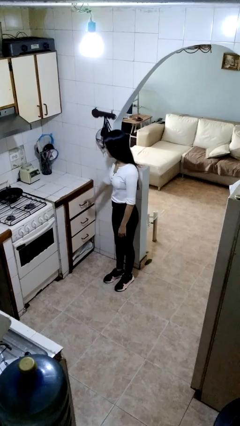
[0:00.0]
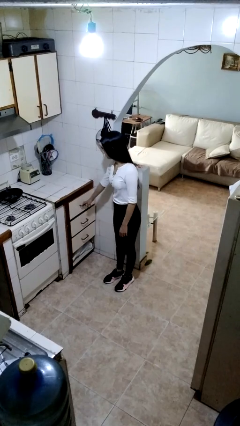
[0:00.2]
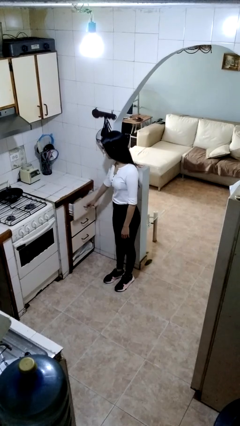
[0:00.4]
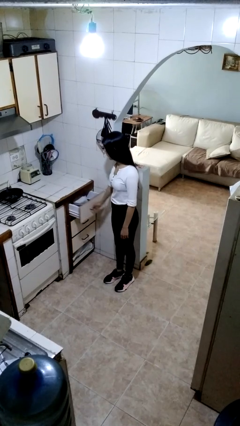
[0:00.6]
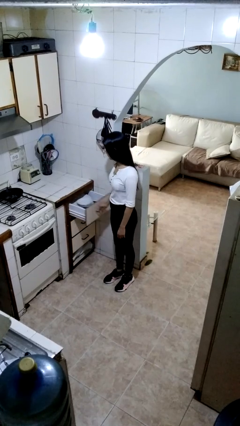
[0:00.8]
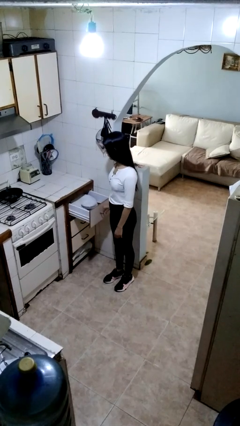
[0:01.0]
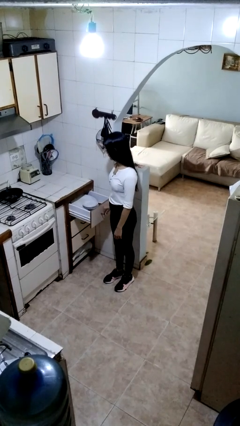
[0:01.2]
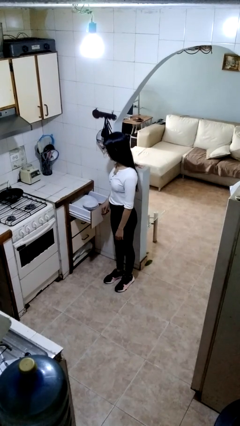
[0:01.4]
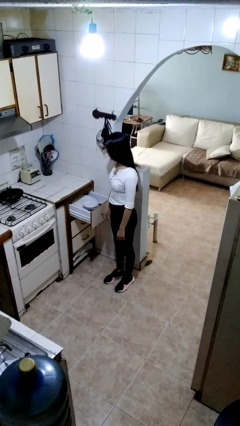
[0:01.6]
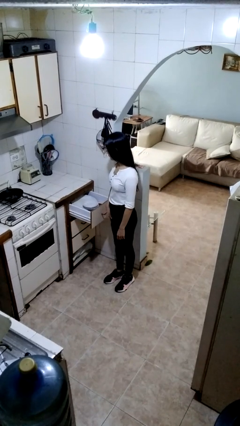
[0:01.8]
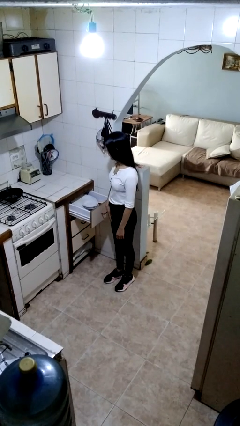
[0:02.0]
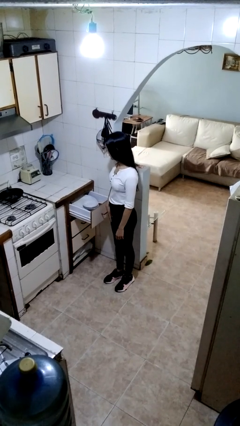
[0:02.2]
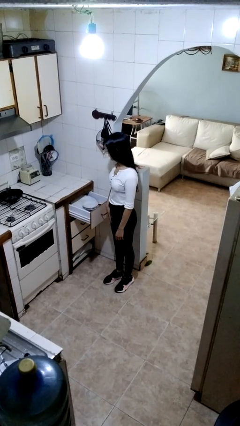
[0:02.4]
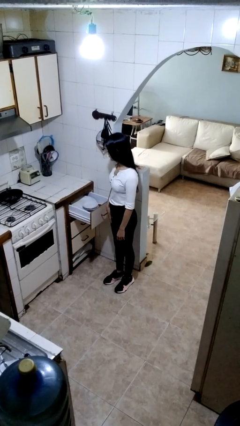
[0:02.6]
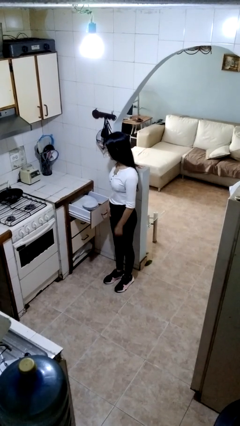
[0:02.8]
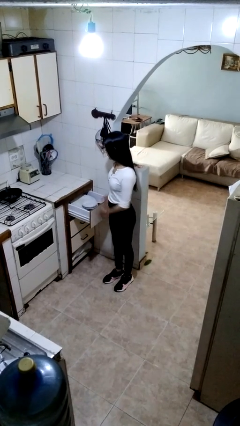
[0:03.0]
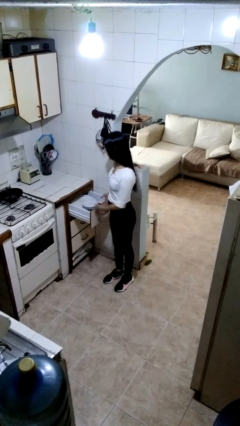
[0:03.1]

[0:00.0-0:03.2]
person opens kitchen drawer

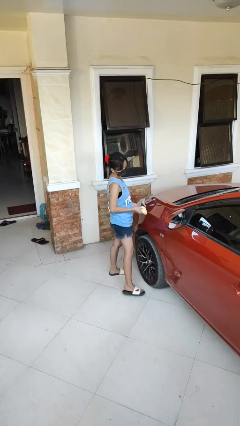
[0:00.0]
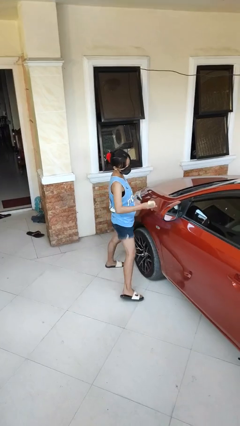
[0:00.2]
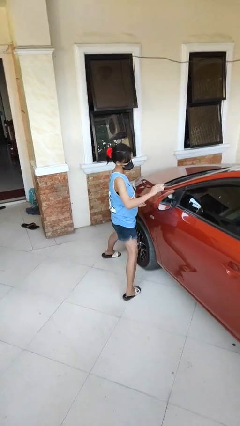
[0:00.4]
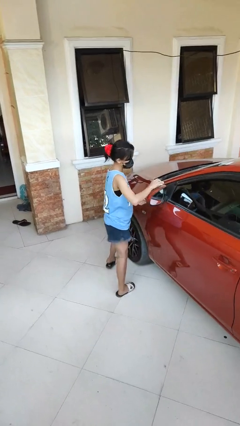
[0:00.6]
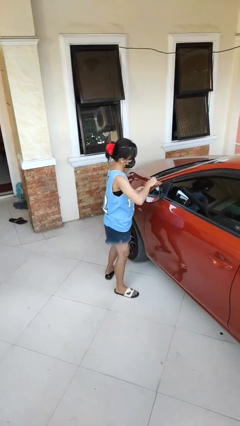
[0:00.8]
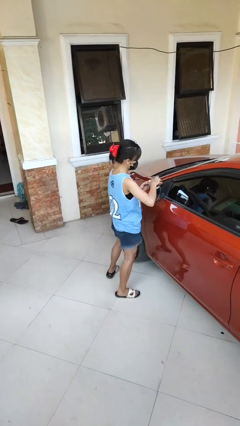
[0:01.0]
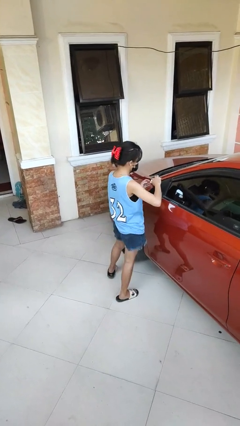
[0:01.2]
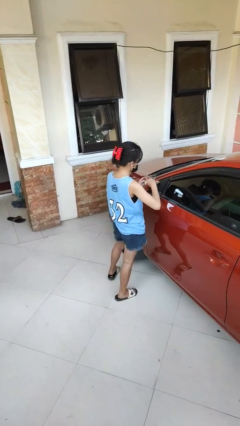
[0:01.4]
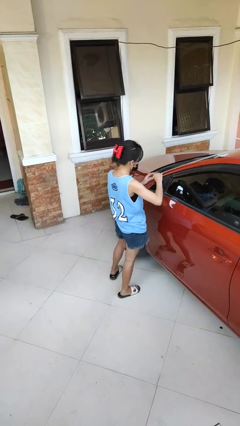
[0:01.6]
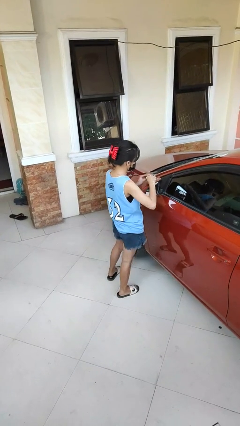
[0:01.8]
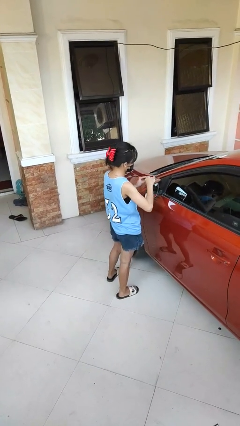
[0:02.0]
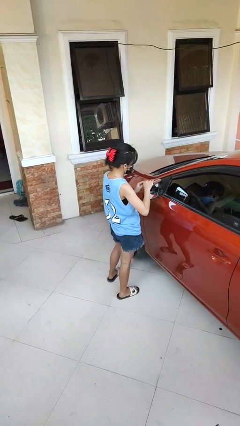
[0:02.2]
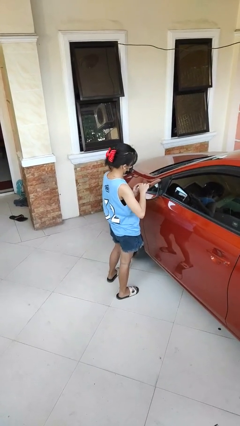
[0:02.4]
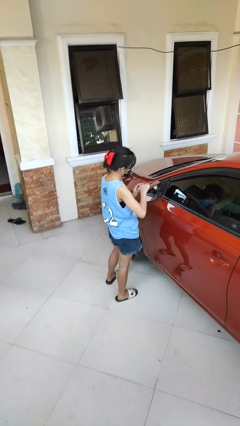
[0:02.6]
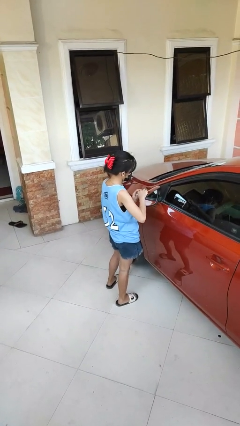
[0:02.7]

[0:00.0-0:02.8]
person polishes car with rag

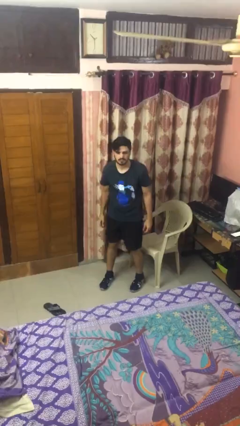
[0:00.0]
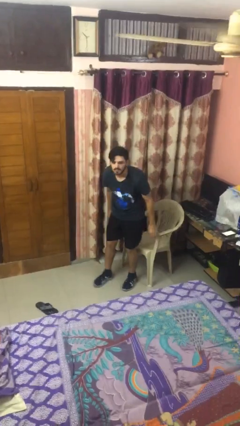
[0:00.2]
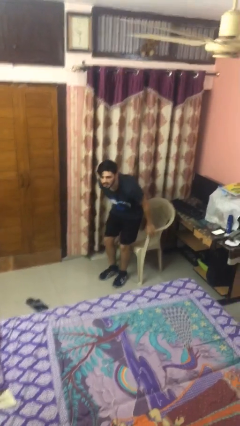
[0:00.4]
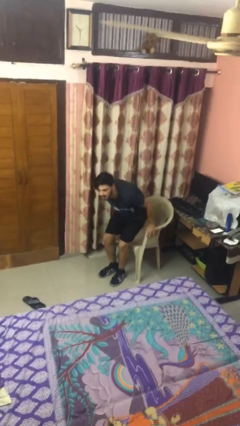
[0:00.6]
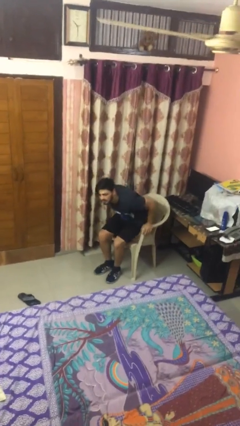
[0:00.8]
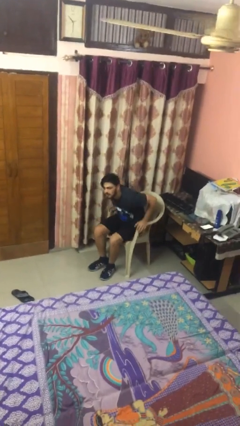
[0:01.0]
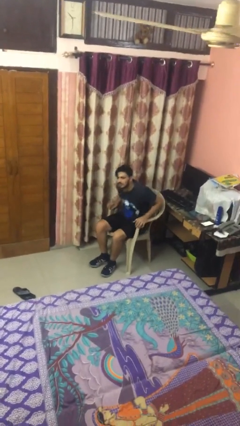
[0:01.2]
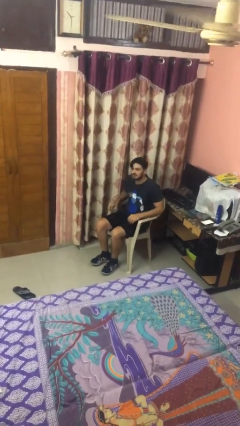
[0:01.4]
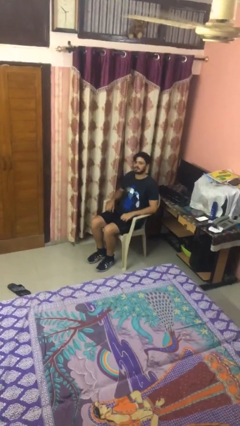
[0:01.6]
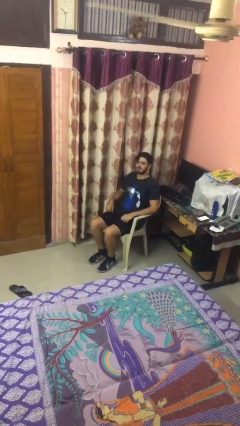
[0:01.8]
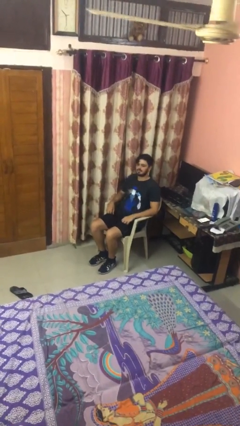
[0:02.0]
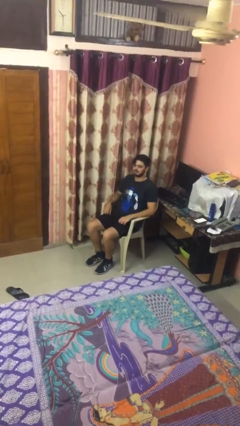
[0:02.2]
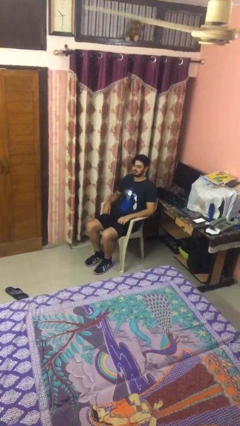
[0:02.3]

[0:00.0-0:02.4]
person sits down

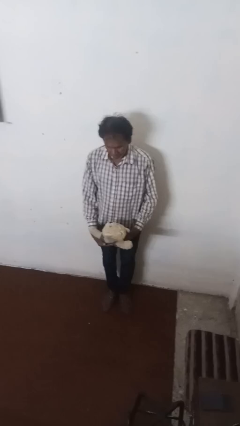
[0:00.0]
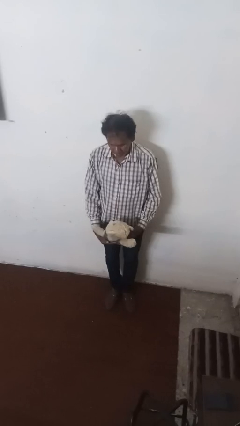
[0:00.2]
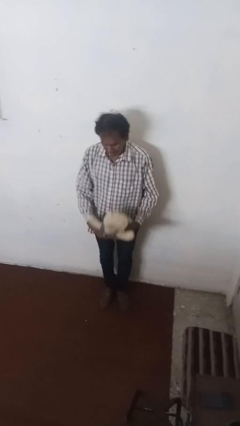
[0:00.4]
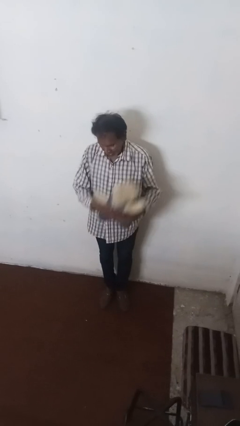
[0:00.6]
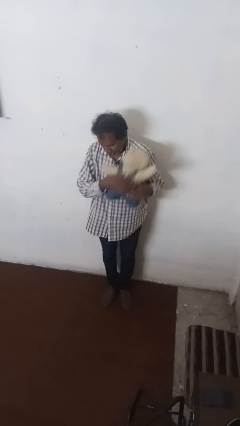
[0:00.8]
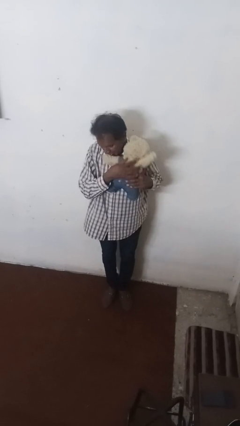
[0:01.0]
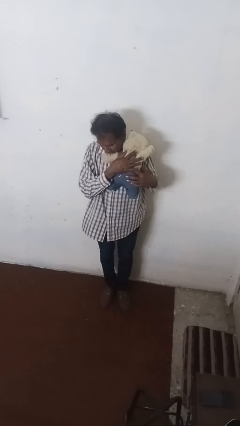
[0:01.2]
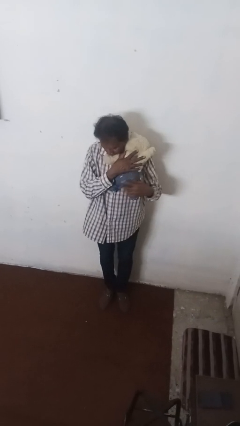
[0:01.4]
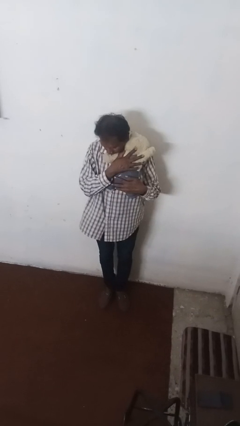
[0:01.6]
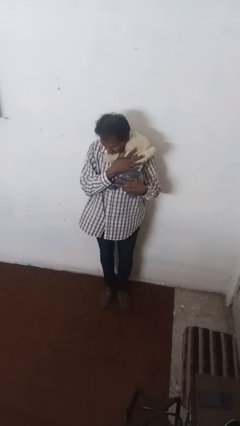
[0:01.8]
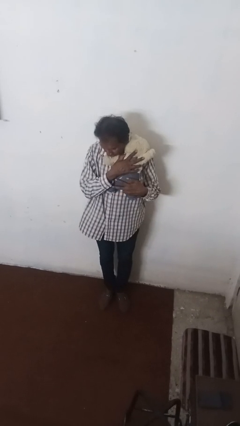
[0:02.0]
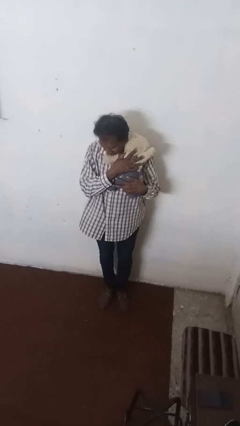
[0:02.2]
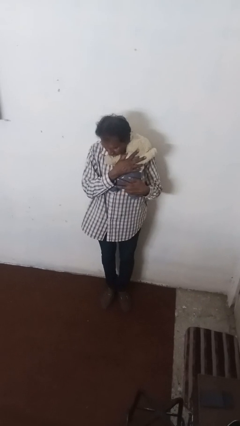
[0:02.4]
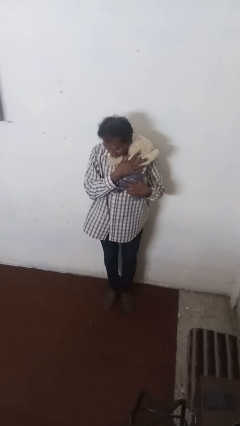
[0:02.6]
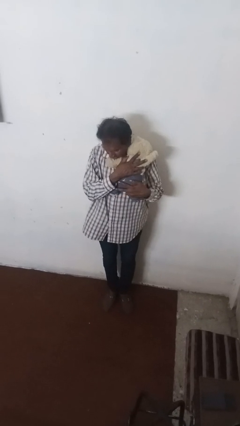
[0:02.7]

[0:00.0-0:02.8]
person hugs stuffed animal

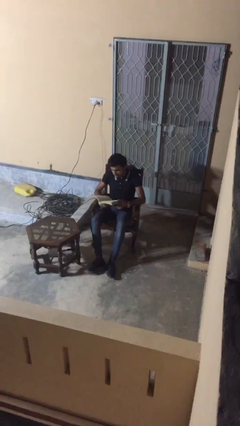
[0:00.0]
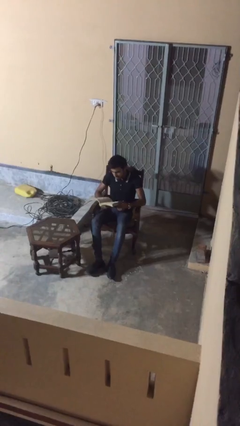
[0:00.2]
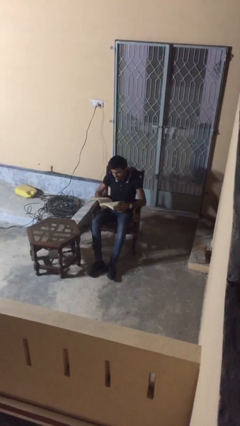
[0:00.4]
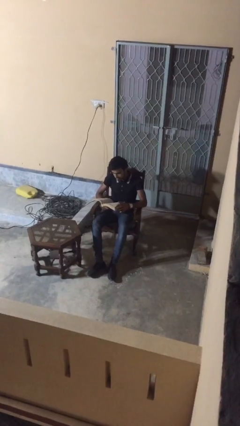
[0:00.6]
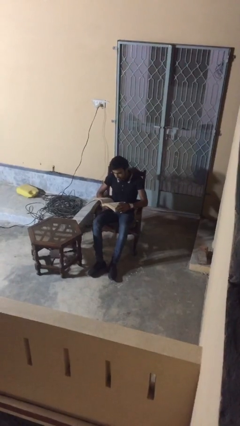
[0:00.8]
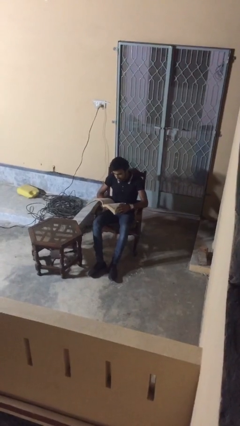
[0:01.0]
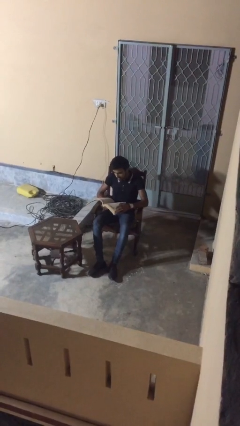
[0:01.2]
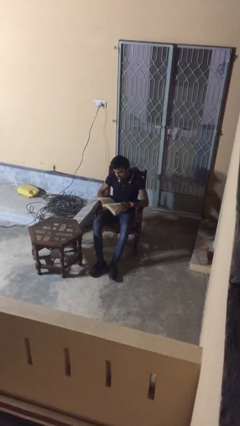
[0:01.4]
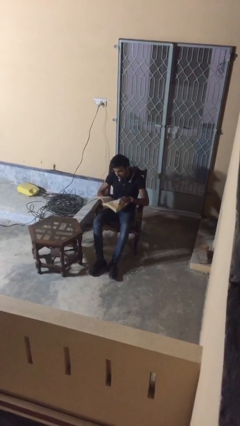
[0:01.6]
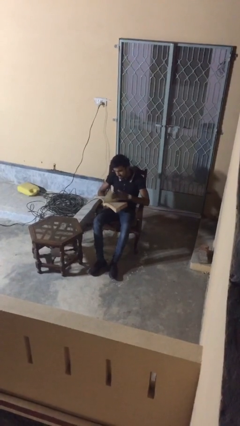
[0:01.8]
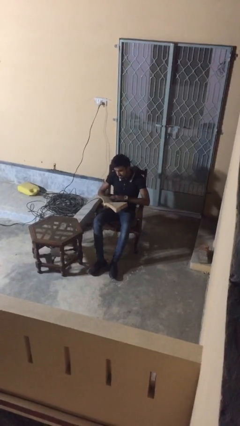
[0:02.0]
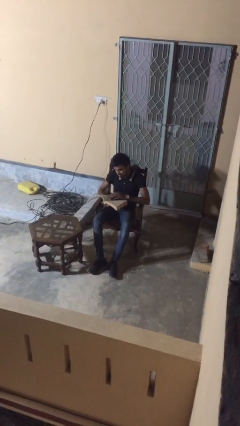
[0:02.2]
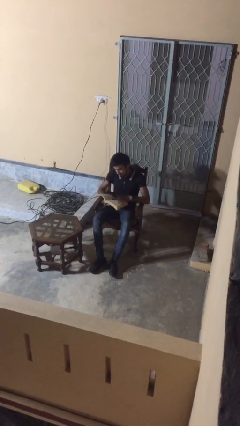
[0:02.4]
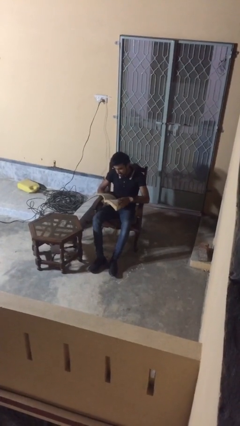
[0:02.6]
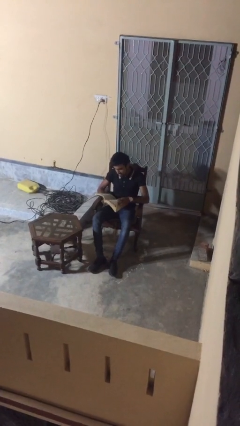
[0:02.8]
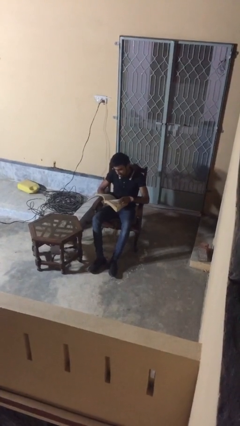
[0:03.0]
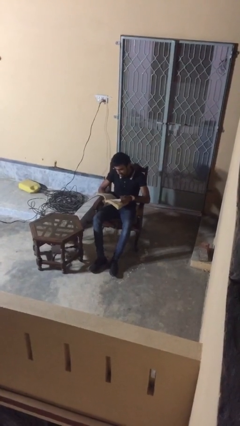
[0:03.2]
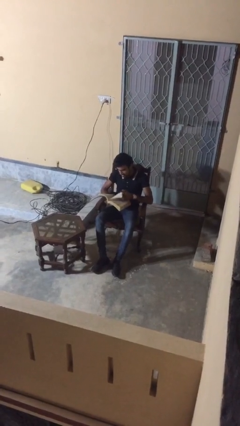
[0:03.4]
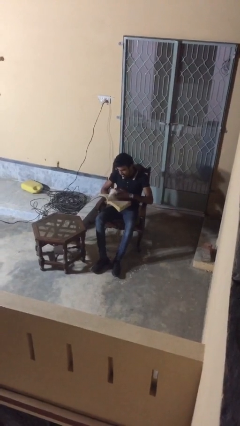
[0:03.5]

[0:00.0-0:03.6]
person reads document

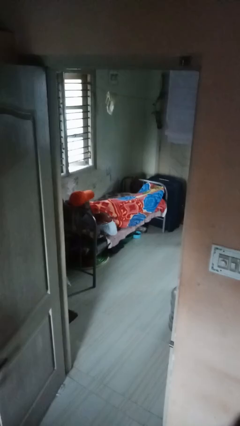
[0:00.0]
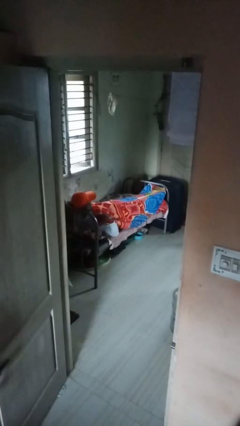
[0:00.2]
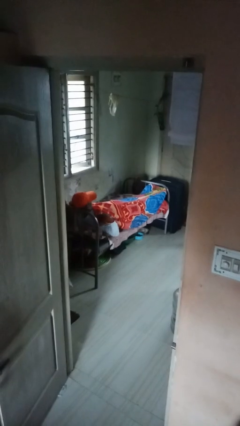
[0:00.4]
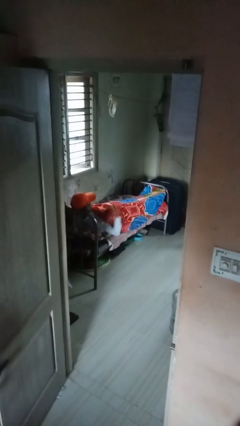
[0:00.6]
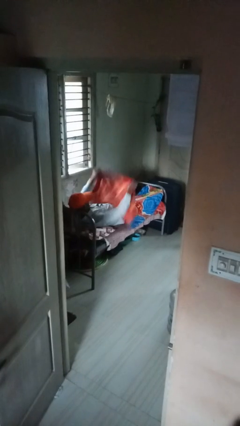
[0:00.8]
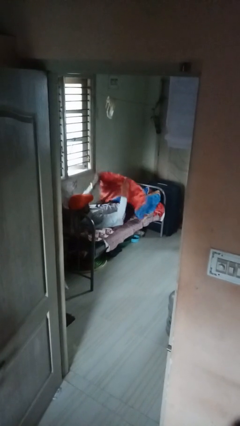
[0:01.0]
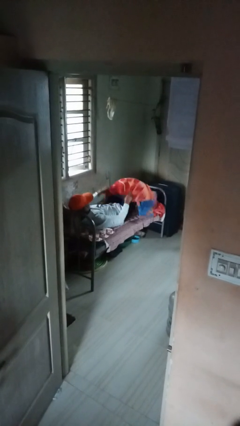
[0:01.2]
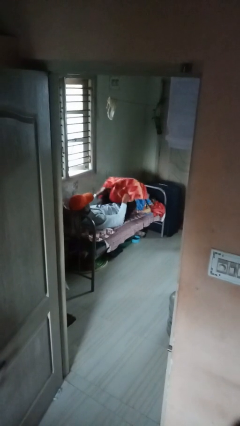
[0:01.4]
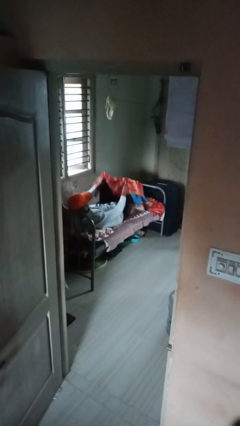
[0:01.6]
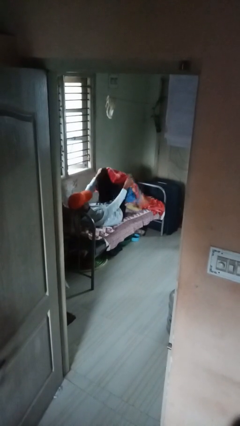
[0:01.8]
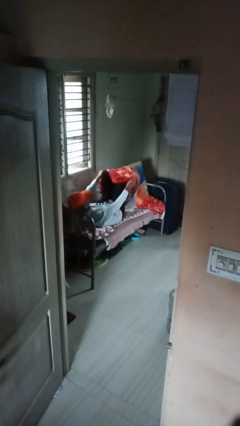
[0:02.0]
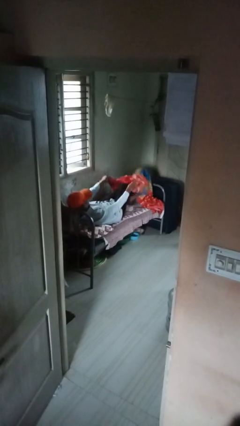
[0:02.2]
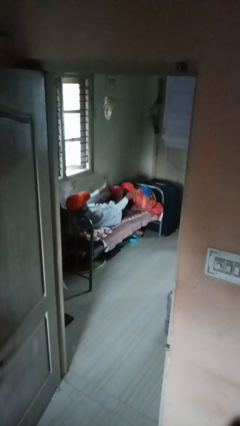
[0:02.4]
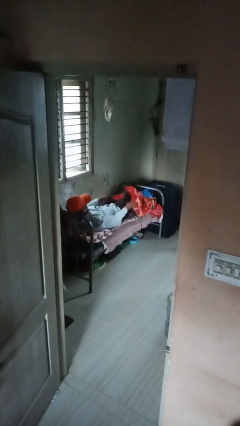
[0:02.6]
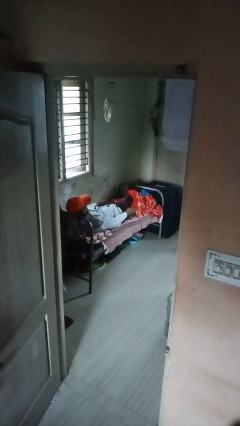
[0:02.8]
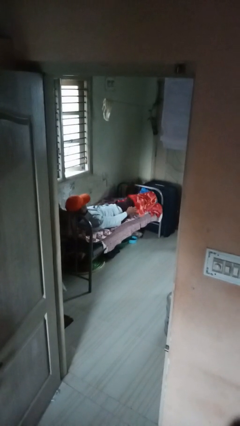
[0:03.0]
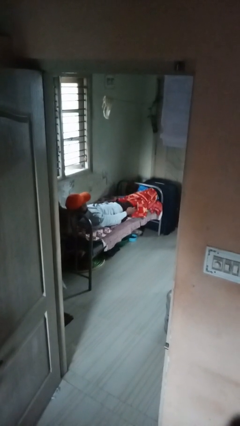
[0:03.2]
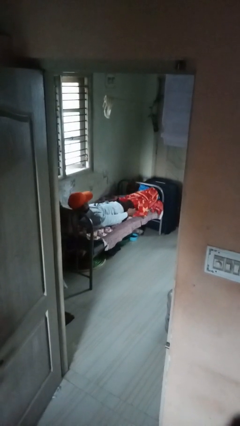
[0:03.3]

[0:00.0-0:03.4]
person uncovers with bedsheets
